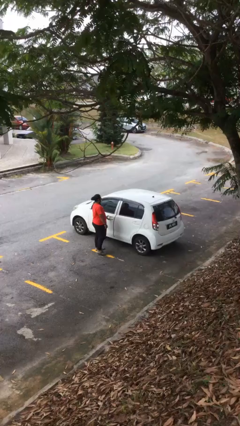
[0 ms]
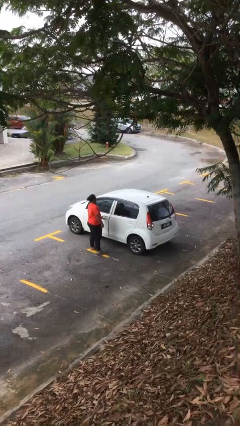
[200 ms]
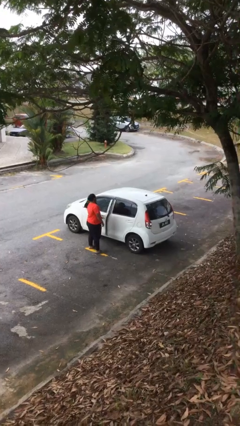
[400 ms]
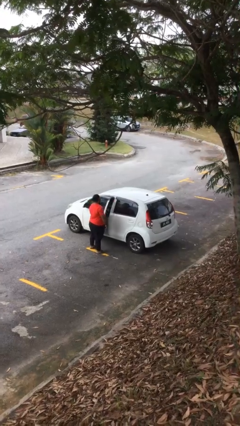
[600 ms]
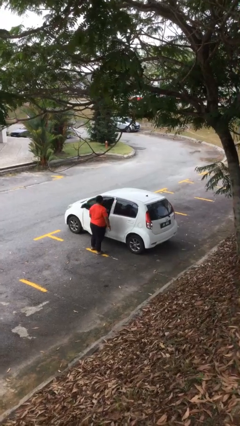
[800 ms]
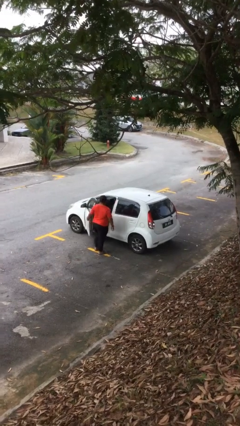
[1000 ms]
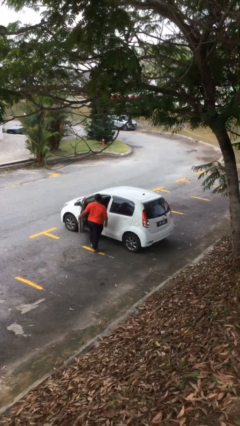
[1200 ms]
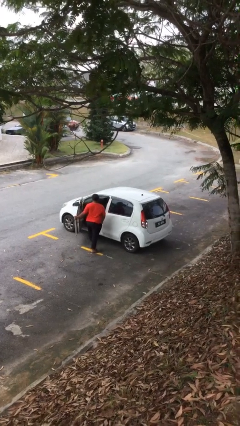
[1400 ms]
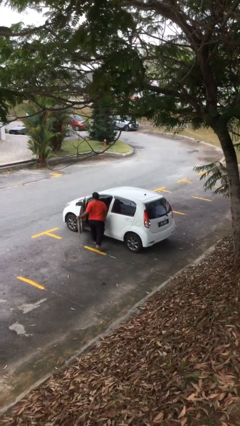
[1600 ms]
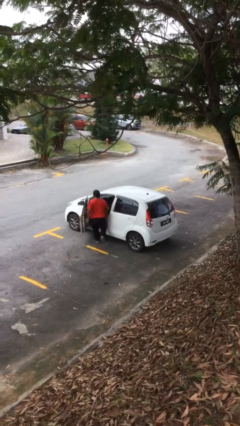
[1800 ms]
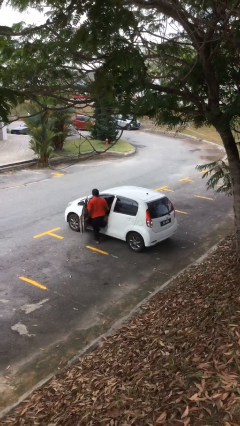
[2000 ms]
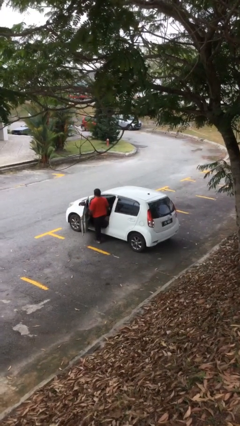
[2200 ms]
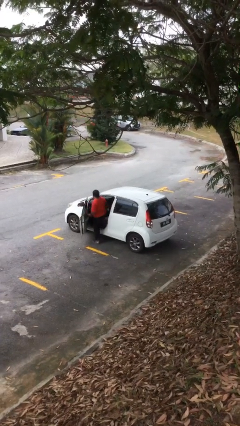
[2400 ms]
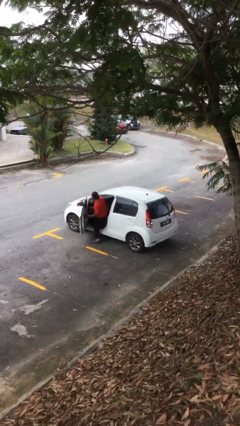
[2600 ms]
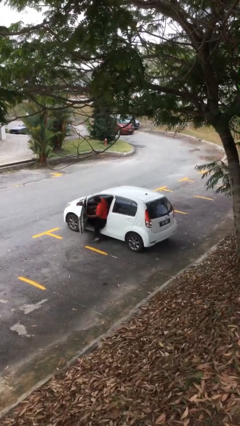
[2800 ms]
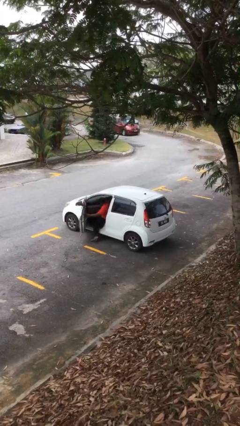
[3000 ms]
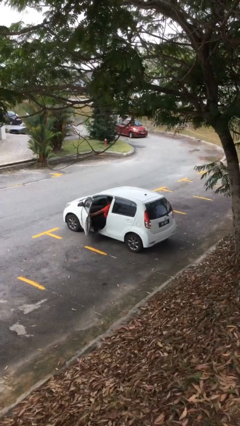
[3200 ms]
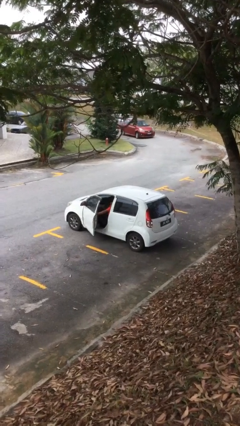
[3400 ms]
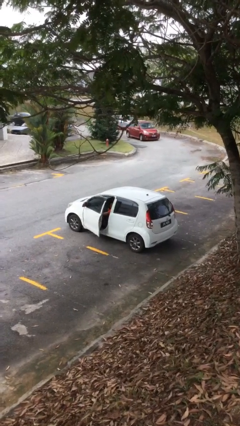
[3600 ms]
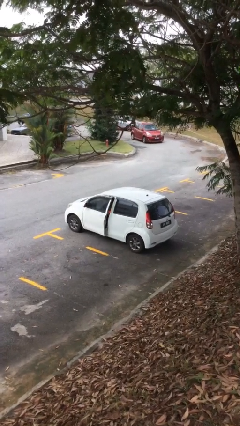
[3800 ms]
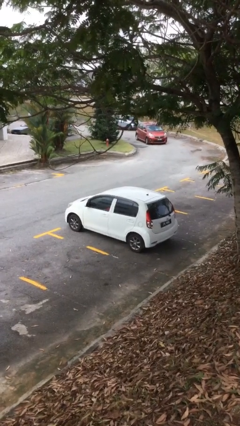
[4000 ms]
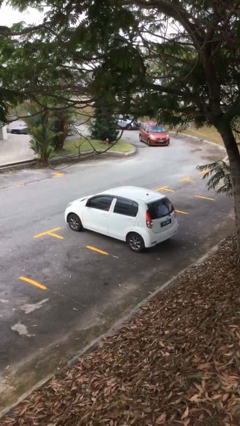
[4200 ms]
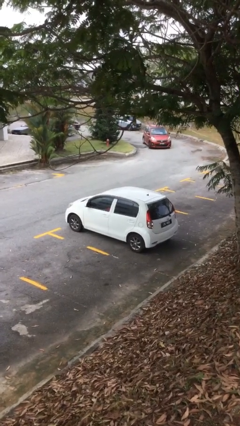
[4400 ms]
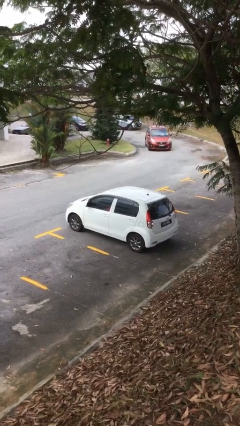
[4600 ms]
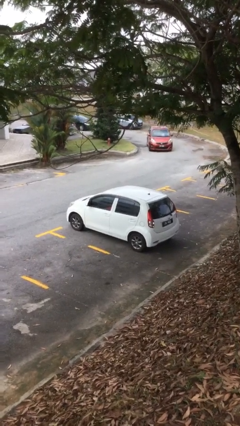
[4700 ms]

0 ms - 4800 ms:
car picks up person

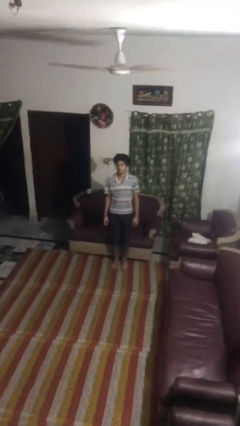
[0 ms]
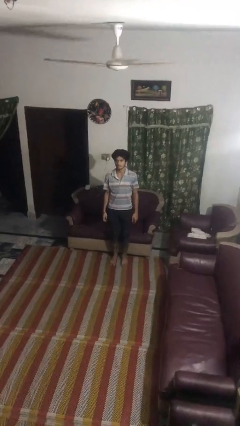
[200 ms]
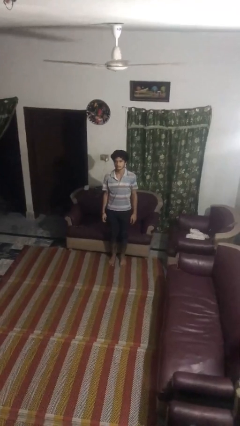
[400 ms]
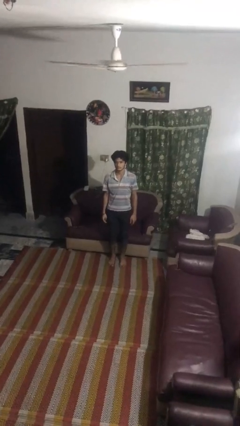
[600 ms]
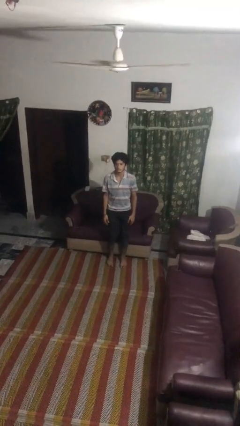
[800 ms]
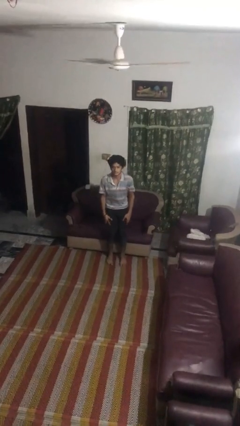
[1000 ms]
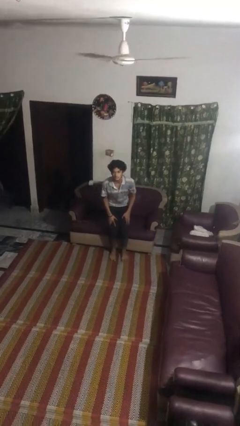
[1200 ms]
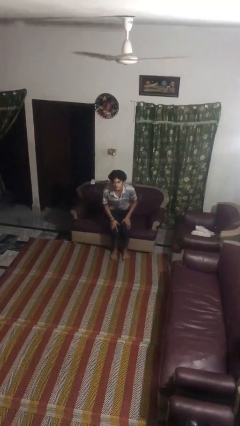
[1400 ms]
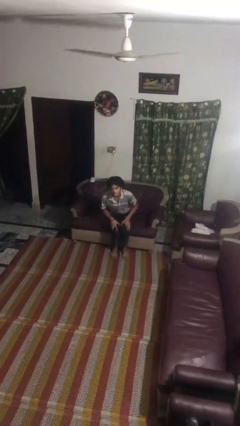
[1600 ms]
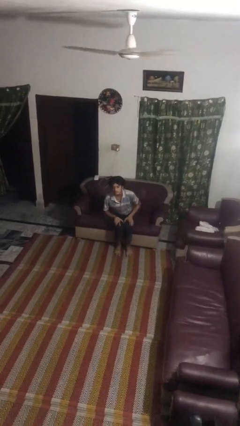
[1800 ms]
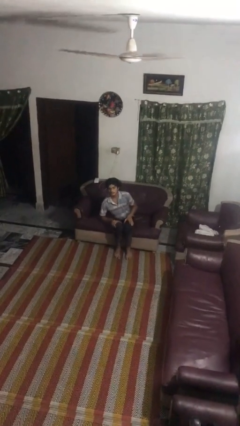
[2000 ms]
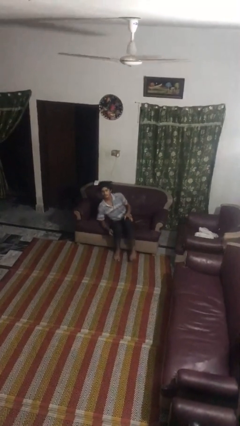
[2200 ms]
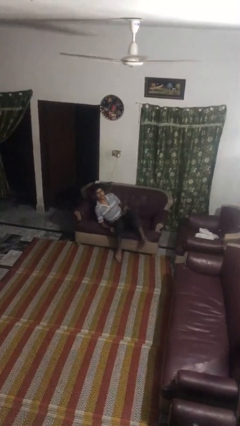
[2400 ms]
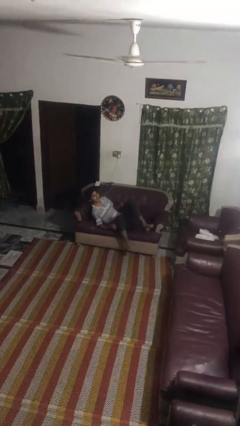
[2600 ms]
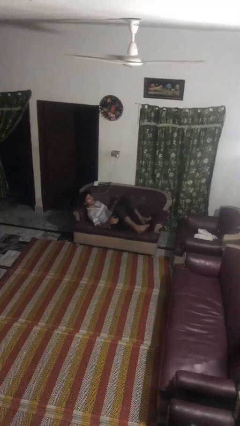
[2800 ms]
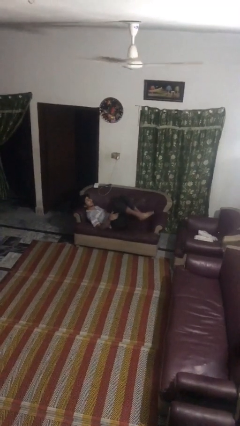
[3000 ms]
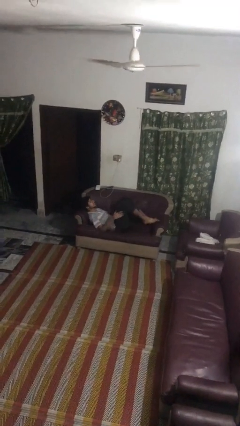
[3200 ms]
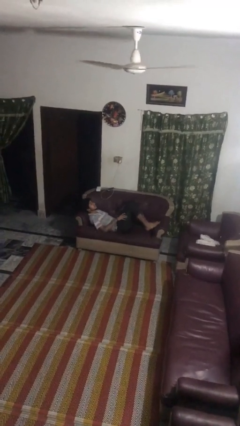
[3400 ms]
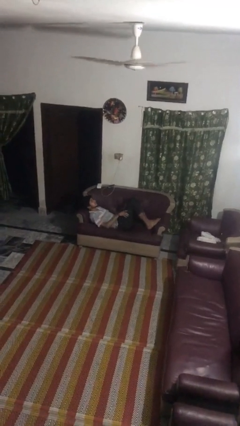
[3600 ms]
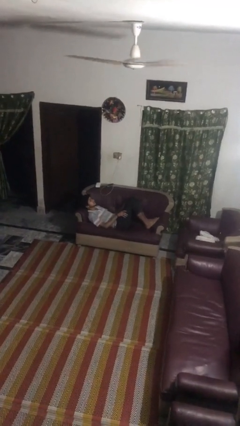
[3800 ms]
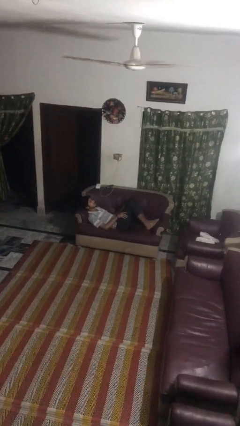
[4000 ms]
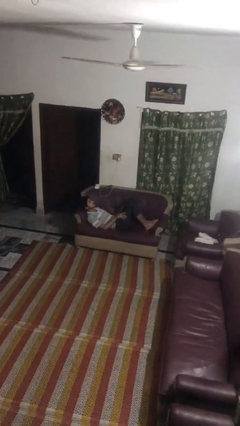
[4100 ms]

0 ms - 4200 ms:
person lies down on couch

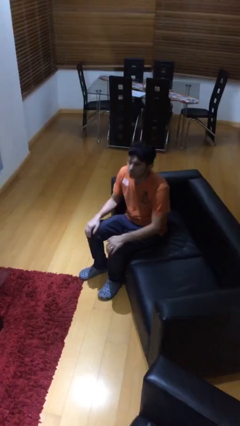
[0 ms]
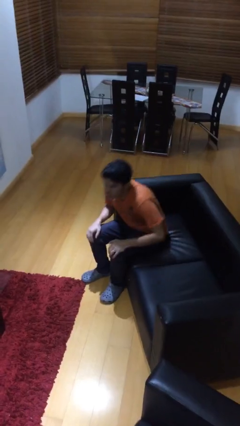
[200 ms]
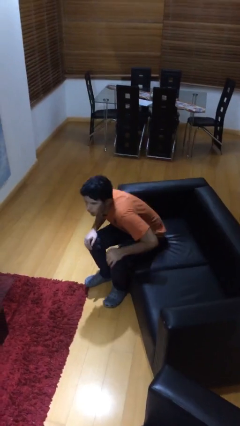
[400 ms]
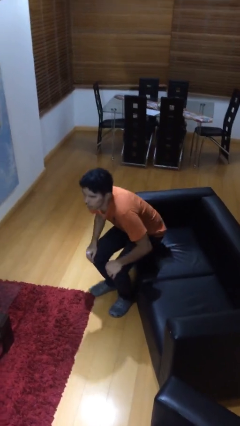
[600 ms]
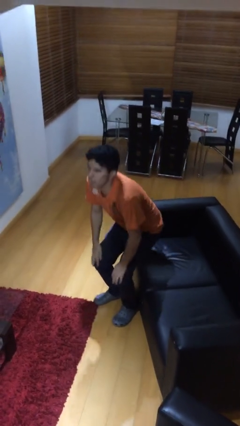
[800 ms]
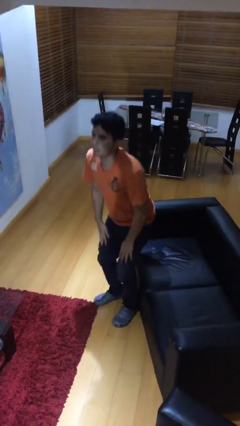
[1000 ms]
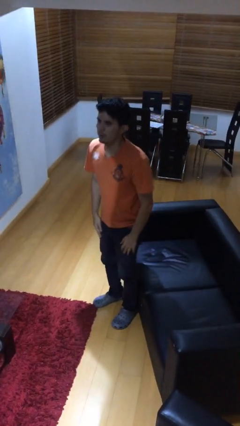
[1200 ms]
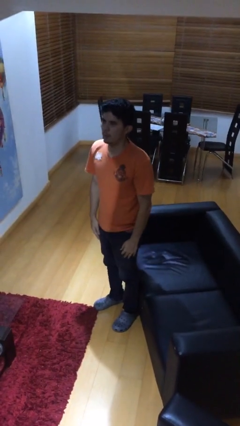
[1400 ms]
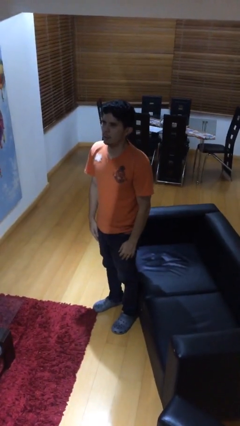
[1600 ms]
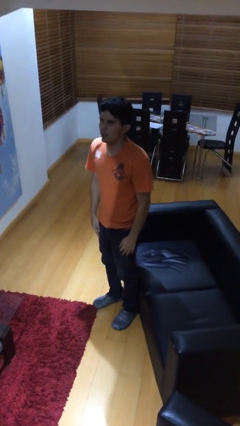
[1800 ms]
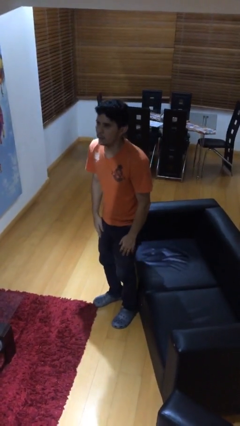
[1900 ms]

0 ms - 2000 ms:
person stands up

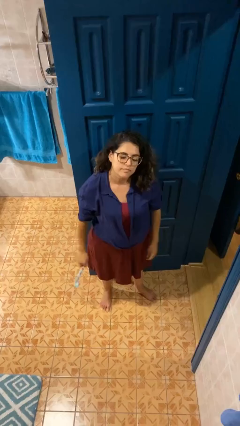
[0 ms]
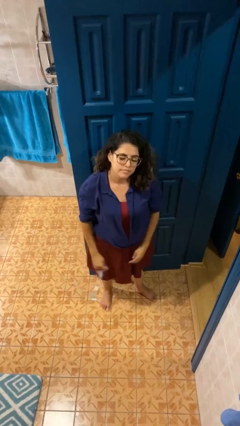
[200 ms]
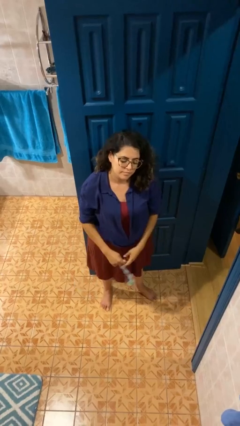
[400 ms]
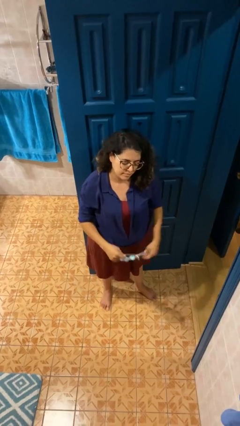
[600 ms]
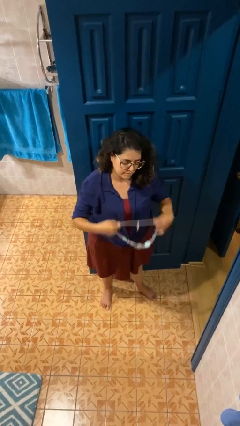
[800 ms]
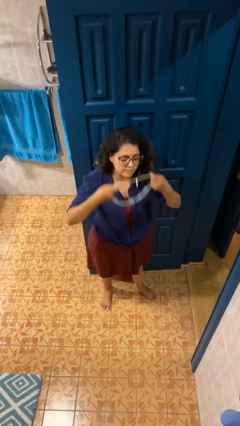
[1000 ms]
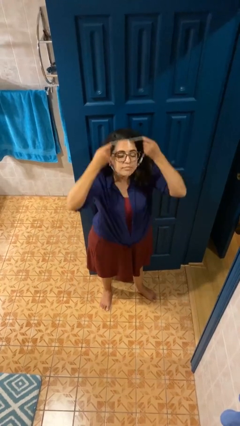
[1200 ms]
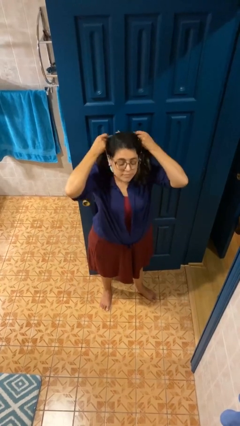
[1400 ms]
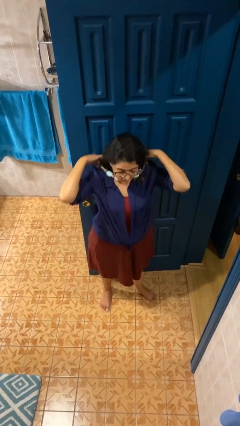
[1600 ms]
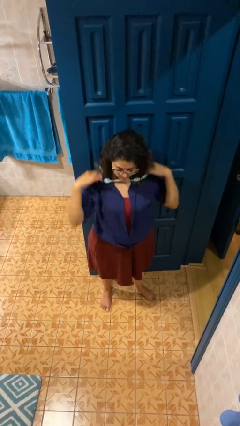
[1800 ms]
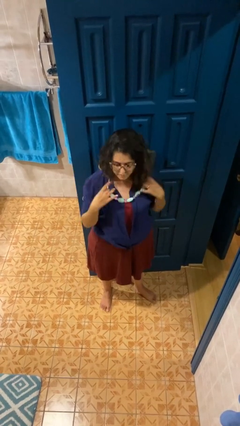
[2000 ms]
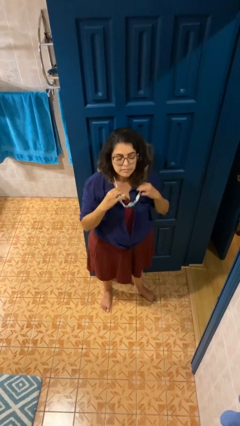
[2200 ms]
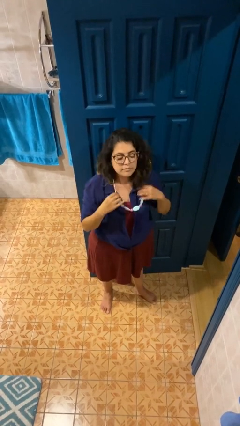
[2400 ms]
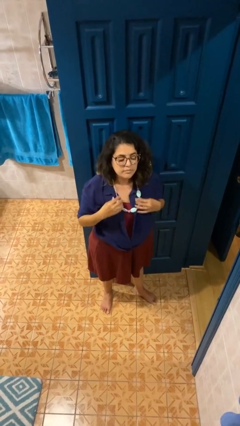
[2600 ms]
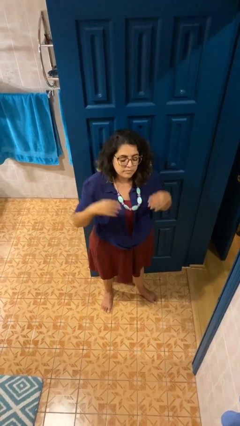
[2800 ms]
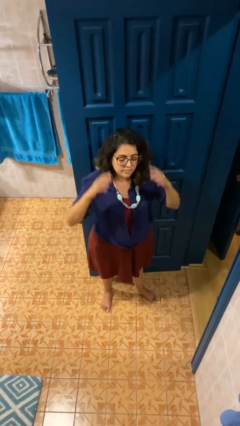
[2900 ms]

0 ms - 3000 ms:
person puts on necklace

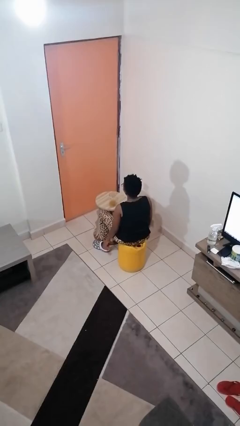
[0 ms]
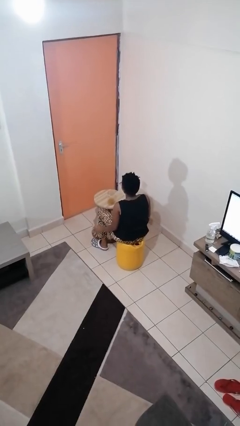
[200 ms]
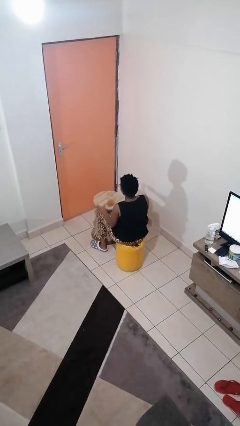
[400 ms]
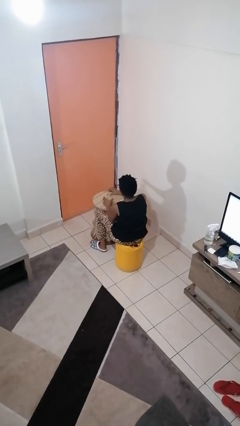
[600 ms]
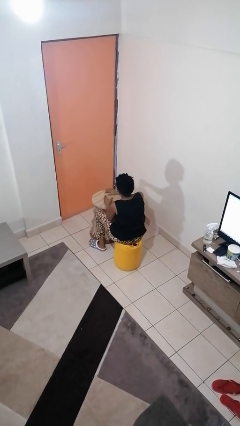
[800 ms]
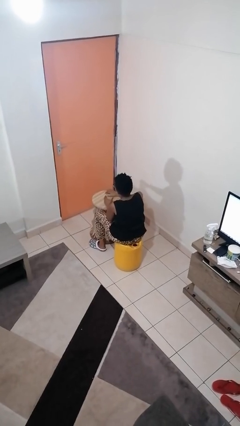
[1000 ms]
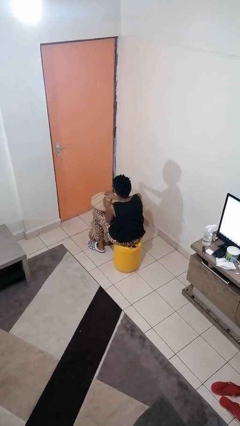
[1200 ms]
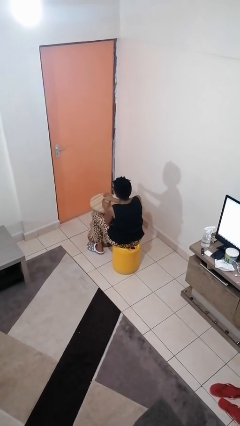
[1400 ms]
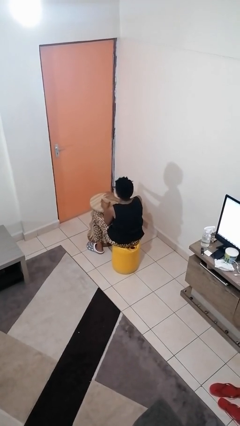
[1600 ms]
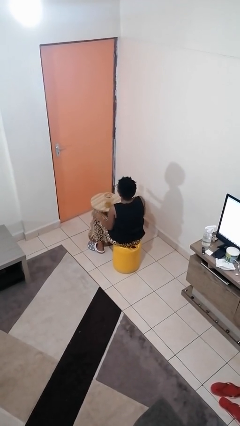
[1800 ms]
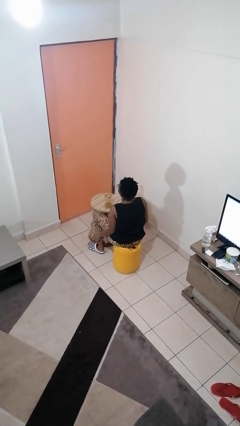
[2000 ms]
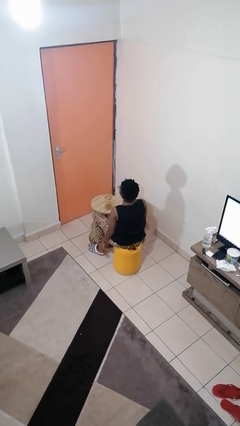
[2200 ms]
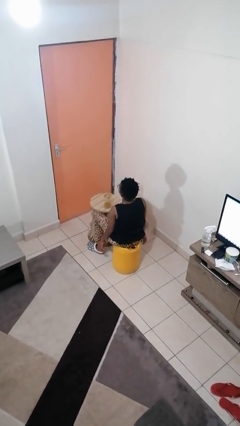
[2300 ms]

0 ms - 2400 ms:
person closes jar

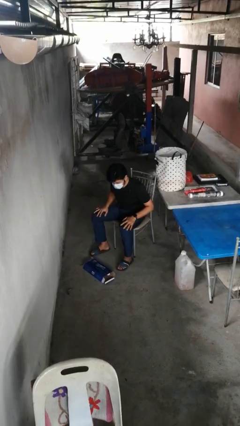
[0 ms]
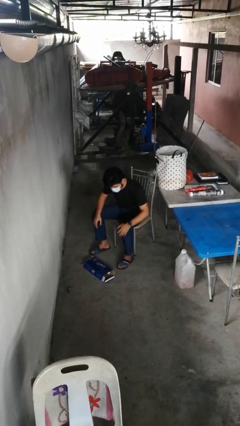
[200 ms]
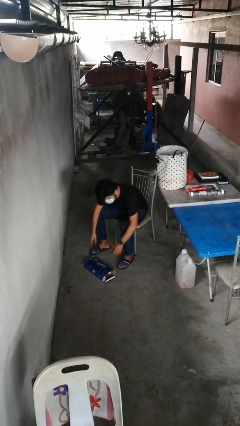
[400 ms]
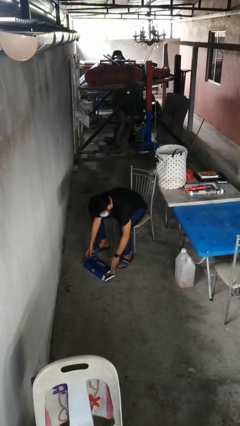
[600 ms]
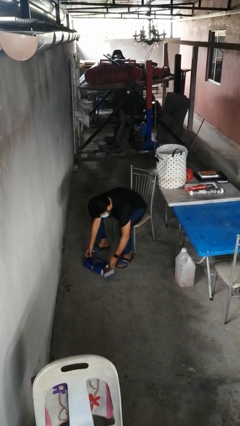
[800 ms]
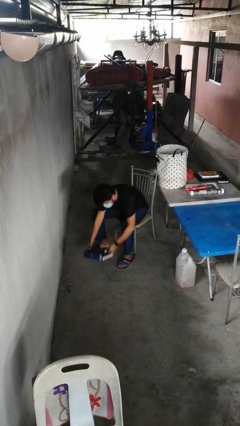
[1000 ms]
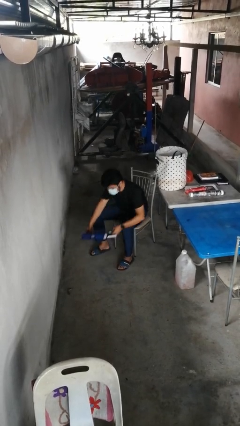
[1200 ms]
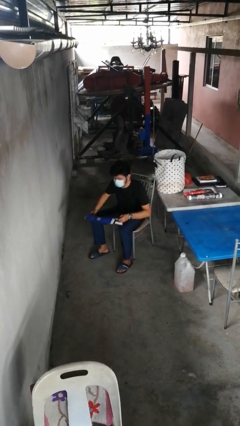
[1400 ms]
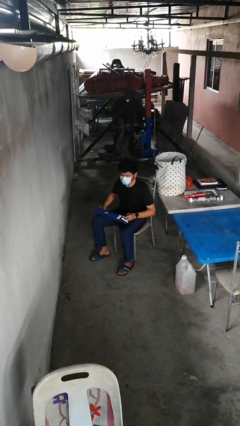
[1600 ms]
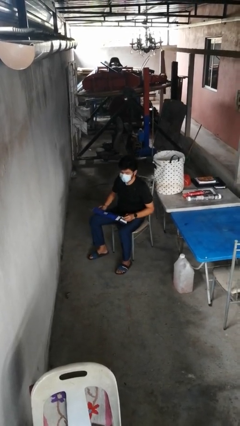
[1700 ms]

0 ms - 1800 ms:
person picks up object from floor
